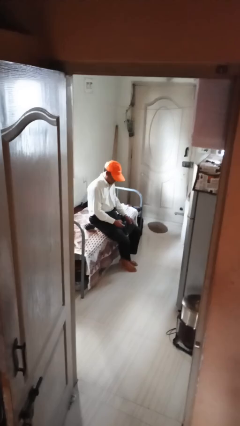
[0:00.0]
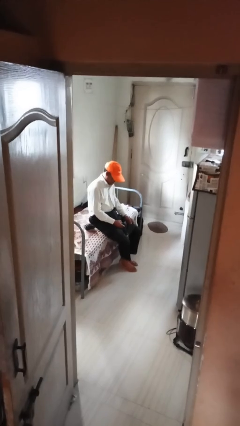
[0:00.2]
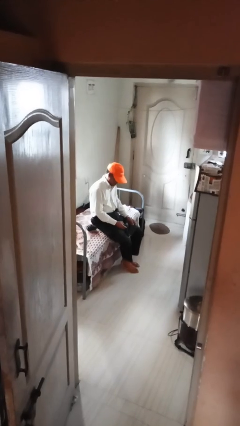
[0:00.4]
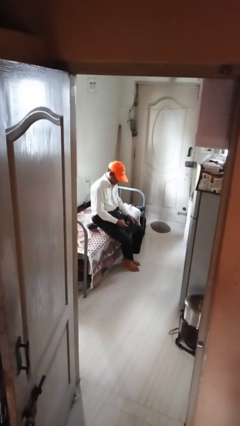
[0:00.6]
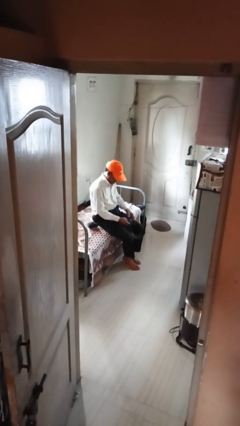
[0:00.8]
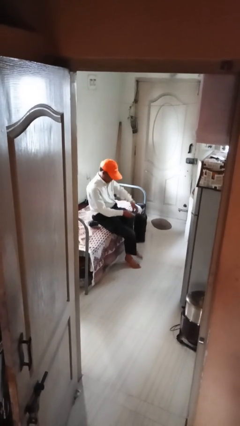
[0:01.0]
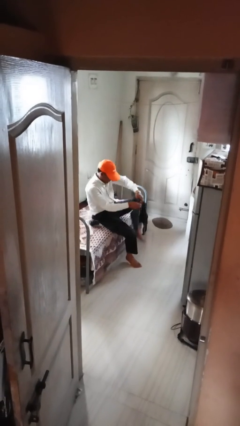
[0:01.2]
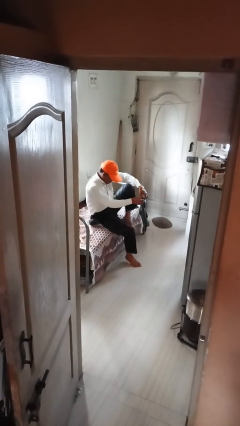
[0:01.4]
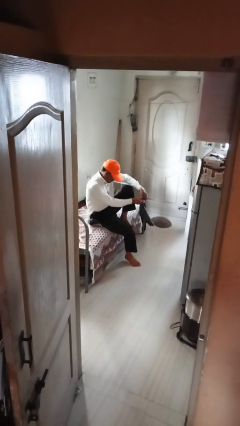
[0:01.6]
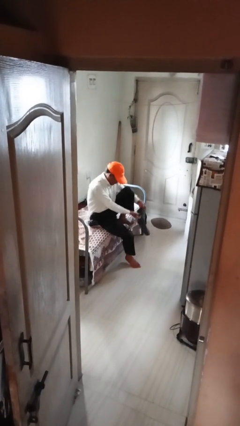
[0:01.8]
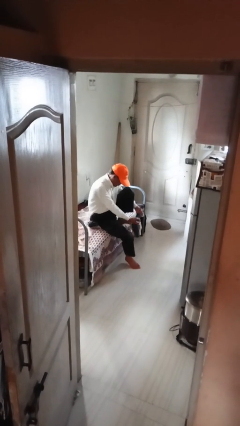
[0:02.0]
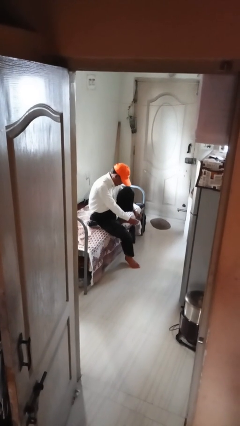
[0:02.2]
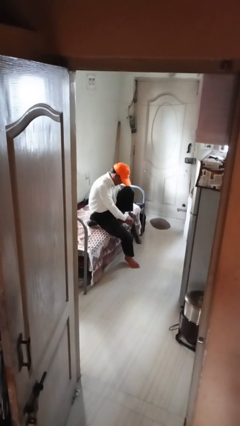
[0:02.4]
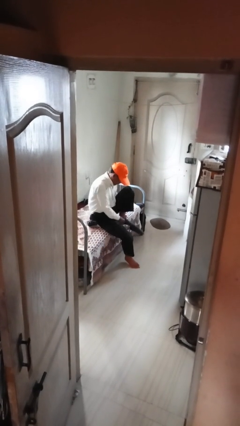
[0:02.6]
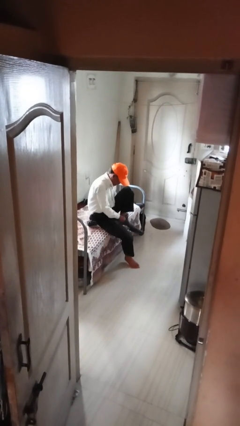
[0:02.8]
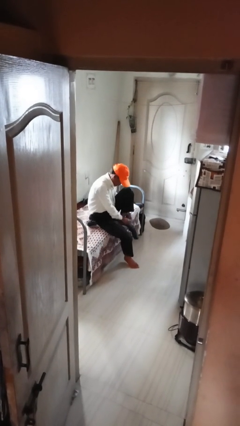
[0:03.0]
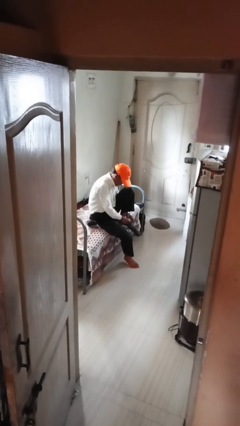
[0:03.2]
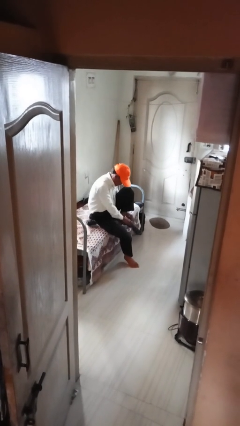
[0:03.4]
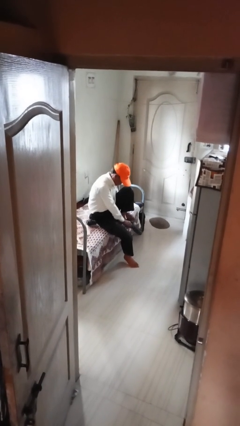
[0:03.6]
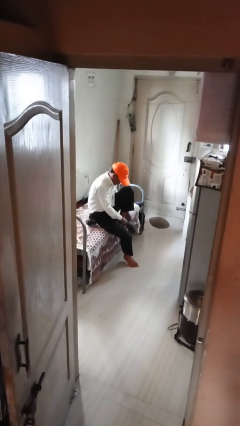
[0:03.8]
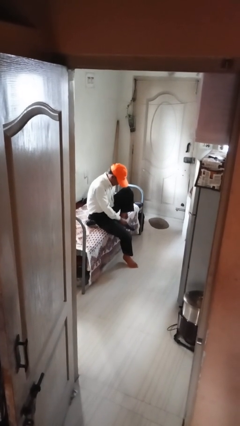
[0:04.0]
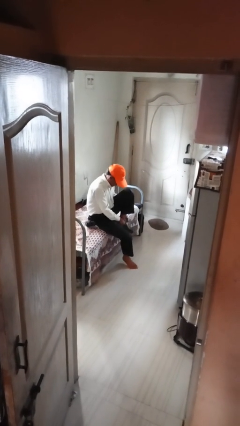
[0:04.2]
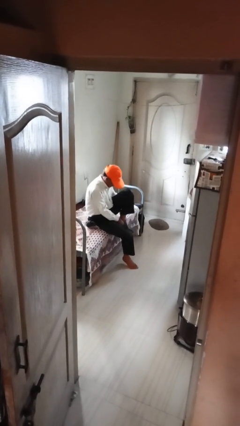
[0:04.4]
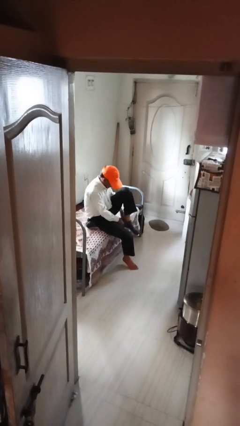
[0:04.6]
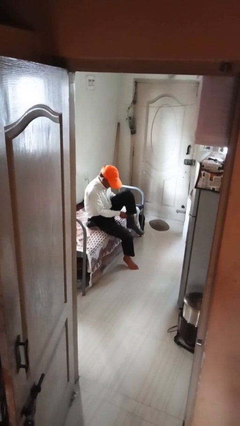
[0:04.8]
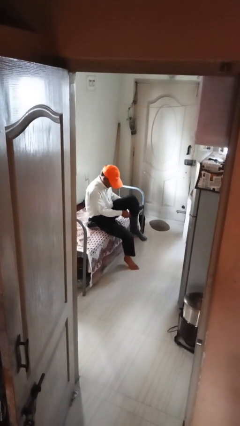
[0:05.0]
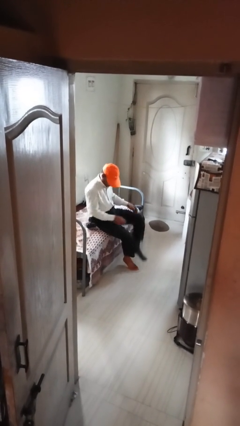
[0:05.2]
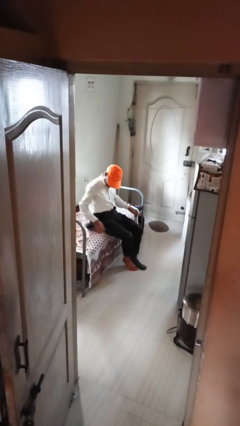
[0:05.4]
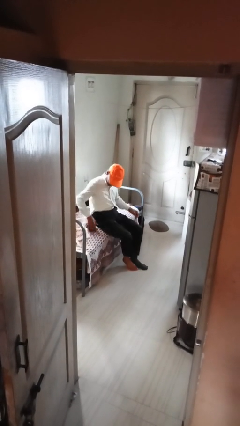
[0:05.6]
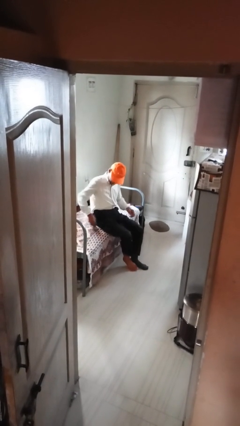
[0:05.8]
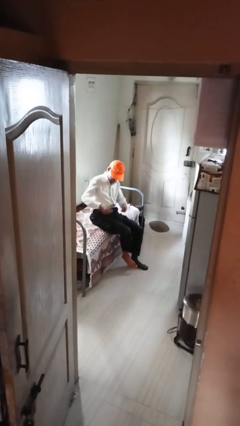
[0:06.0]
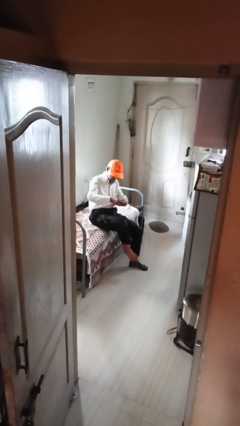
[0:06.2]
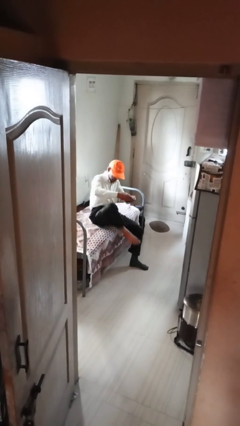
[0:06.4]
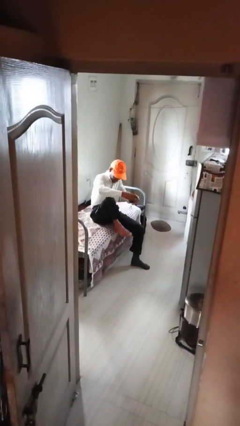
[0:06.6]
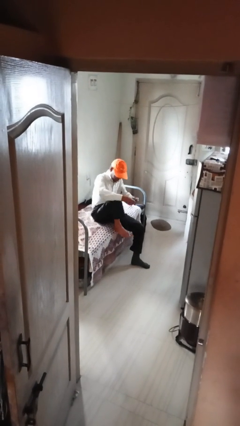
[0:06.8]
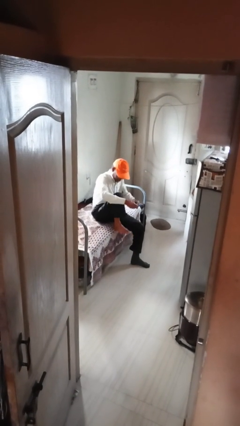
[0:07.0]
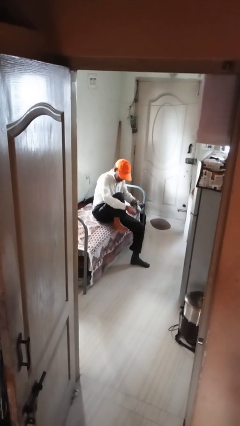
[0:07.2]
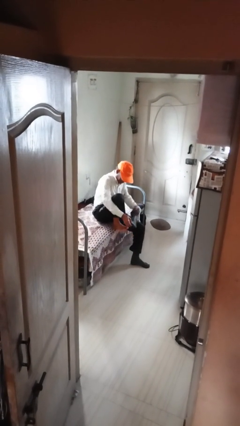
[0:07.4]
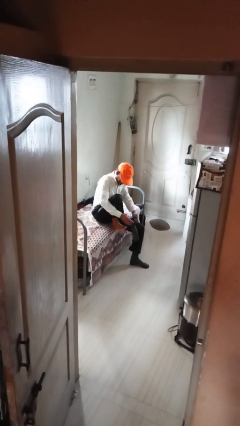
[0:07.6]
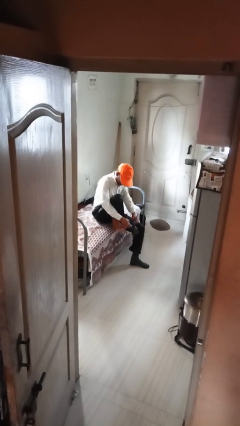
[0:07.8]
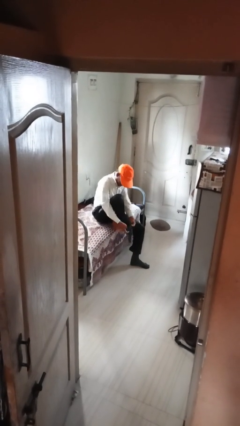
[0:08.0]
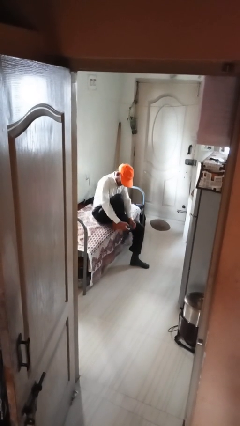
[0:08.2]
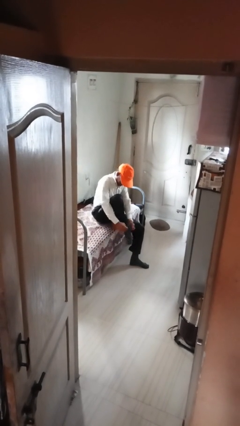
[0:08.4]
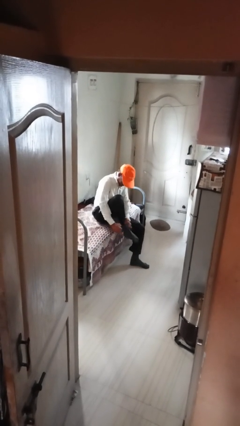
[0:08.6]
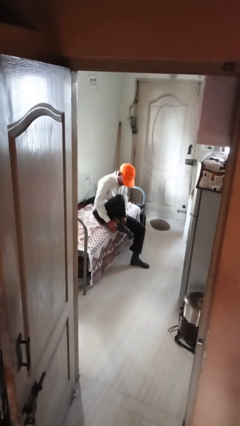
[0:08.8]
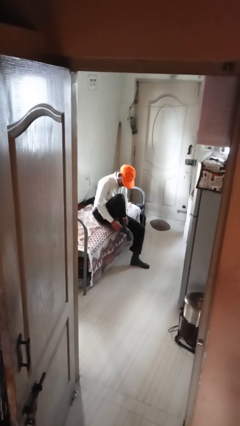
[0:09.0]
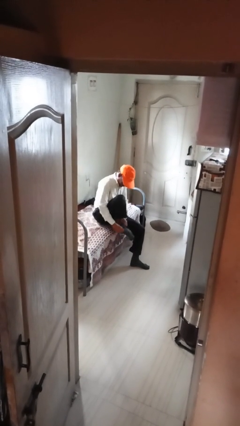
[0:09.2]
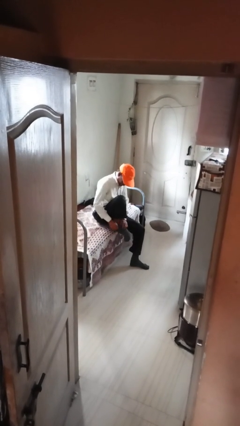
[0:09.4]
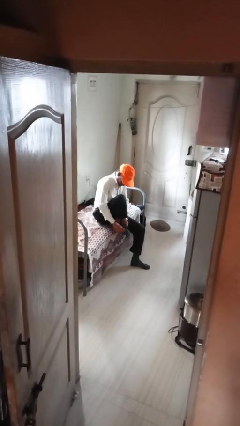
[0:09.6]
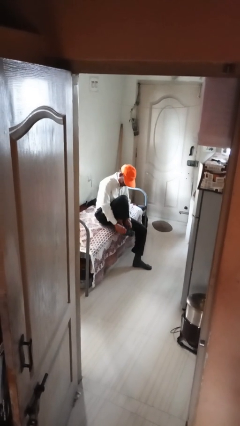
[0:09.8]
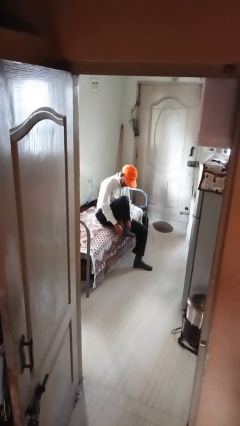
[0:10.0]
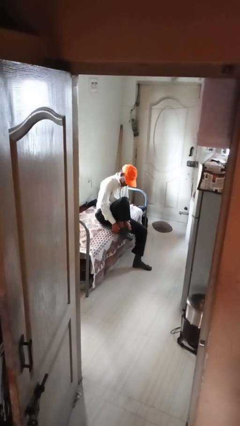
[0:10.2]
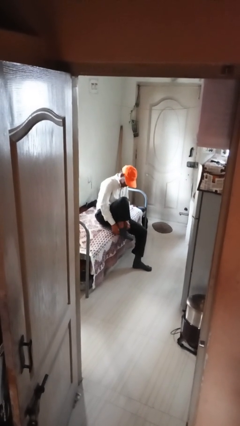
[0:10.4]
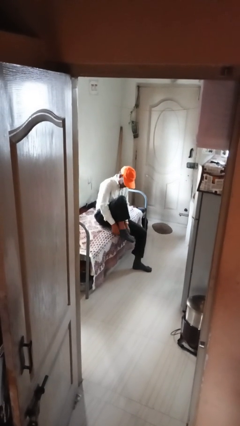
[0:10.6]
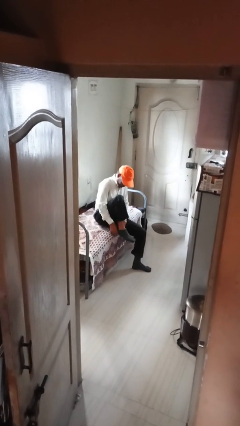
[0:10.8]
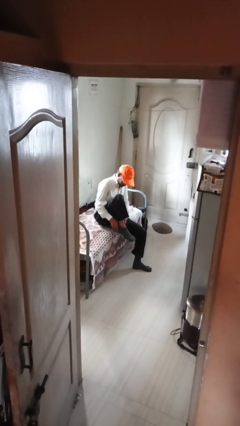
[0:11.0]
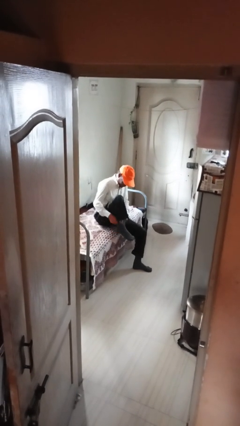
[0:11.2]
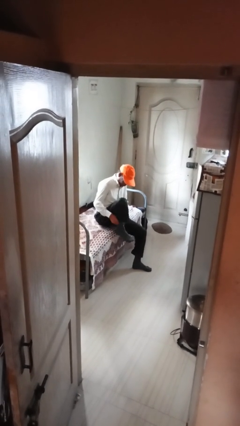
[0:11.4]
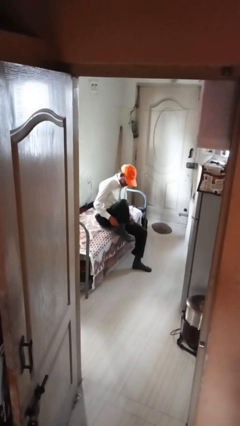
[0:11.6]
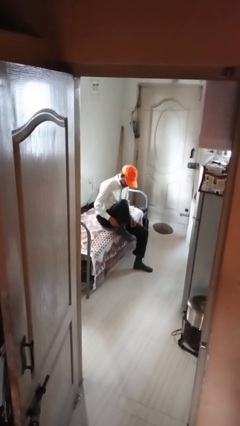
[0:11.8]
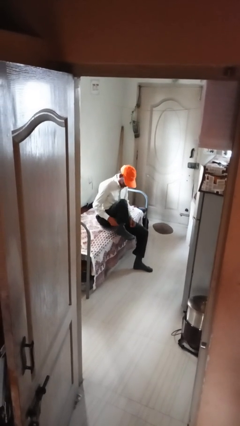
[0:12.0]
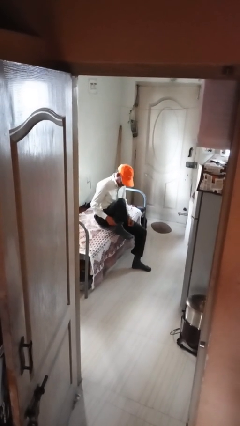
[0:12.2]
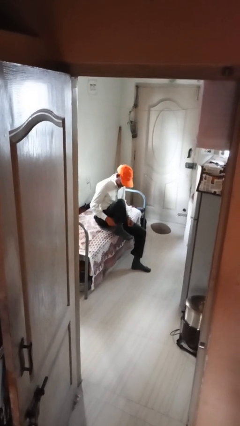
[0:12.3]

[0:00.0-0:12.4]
person puts on socks

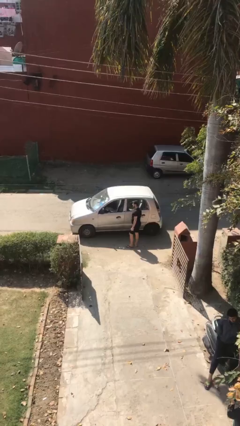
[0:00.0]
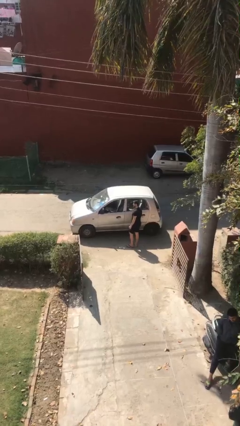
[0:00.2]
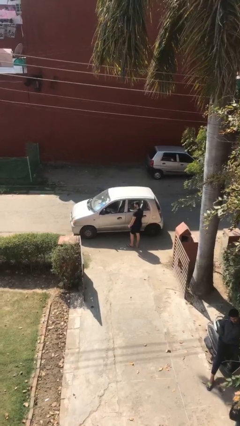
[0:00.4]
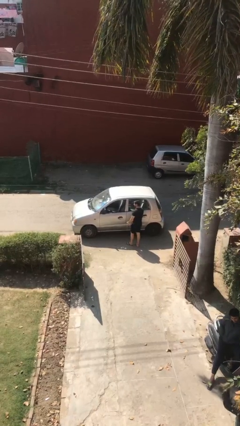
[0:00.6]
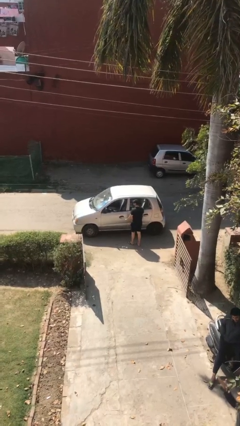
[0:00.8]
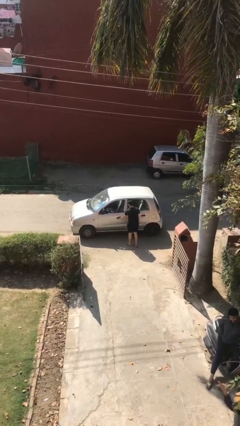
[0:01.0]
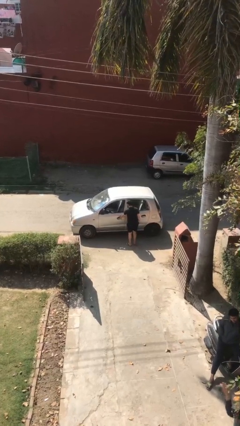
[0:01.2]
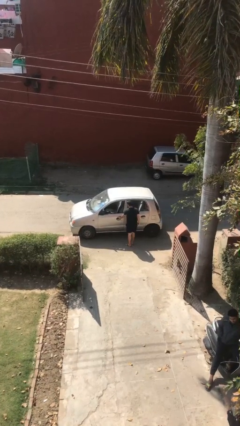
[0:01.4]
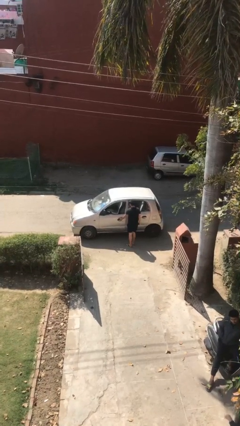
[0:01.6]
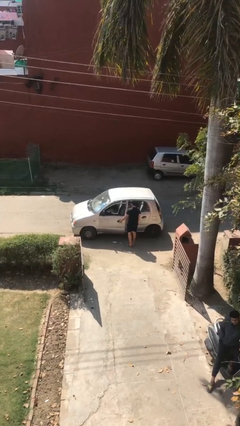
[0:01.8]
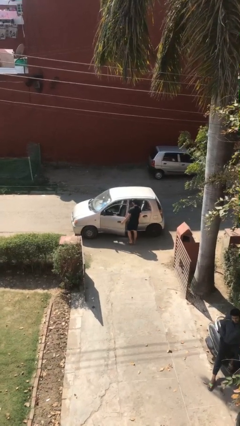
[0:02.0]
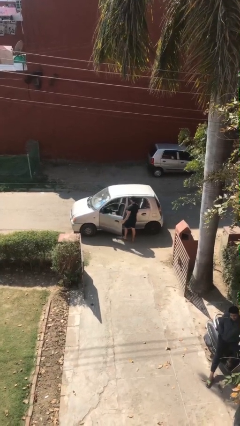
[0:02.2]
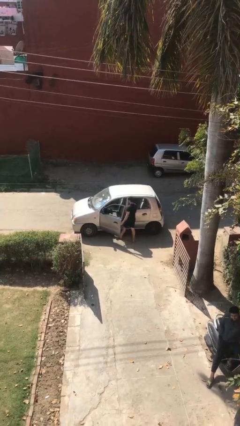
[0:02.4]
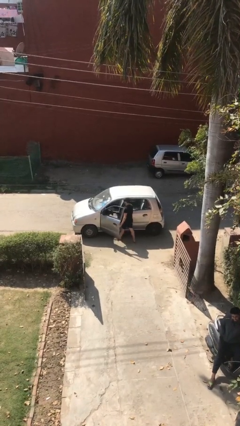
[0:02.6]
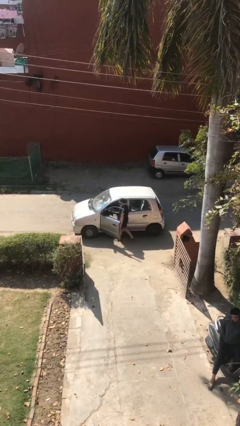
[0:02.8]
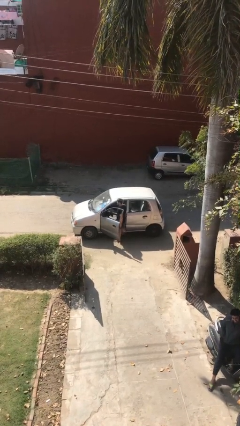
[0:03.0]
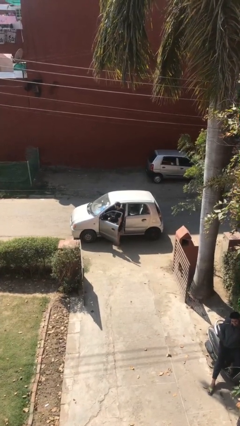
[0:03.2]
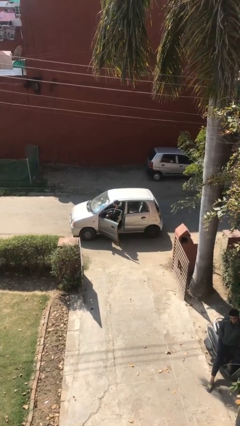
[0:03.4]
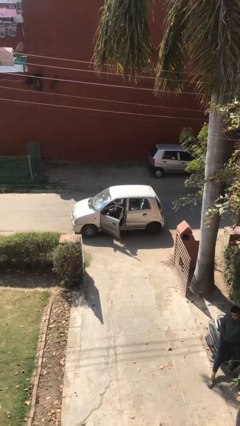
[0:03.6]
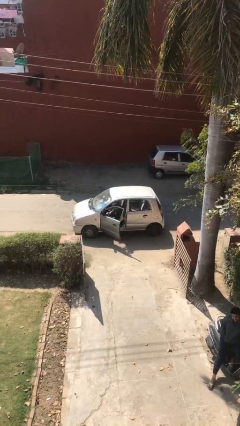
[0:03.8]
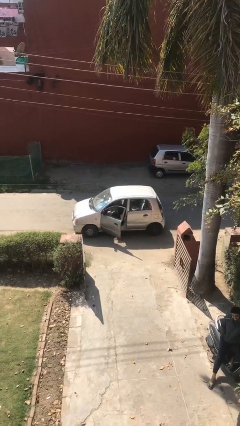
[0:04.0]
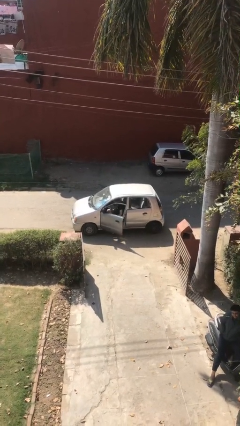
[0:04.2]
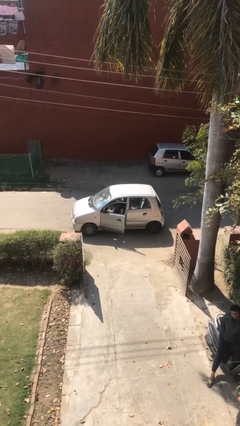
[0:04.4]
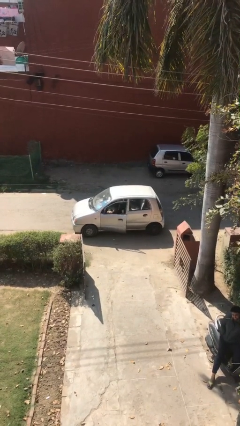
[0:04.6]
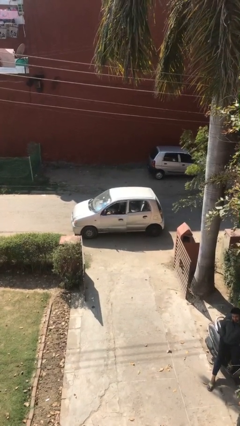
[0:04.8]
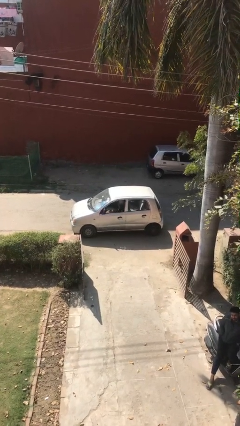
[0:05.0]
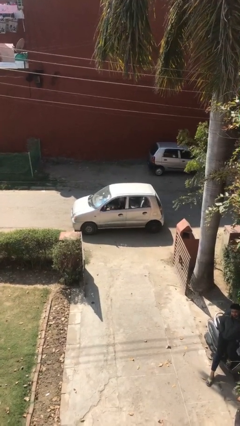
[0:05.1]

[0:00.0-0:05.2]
car picks up person

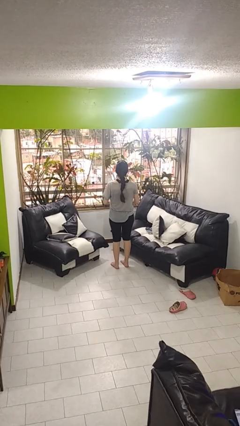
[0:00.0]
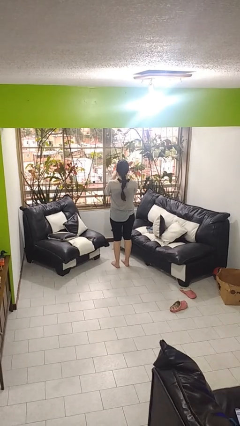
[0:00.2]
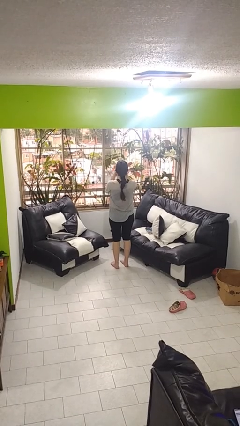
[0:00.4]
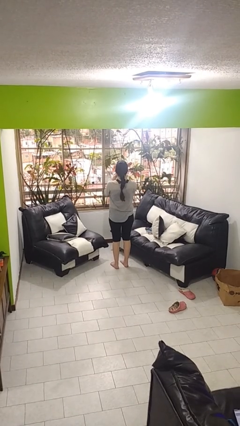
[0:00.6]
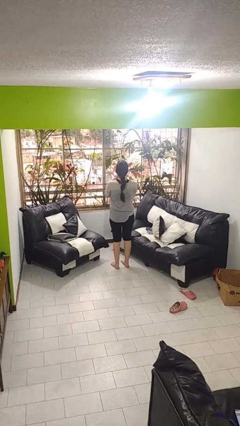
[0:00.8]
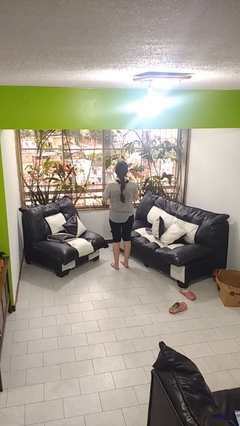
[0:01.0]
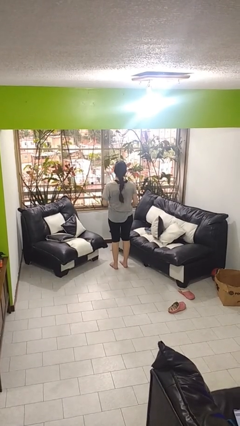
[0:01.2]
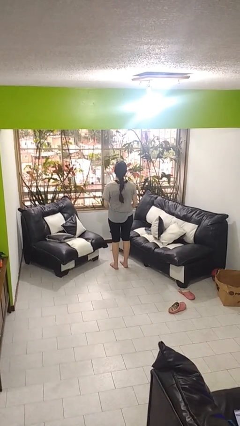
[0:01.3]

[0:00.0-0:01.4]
person wipes mouth with napkin
